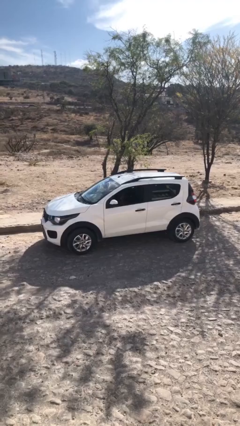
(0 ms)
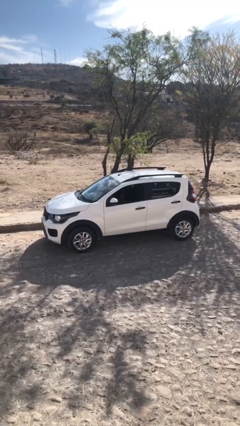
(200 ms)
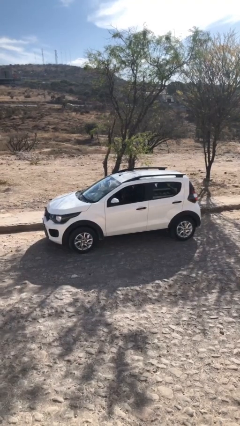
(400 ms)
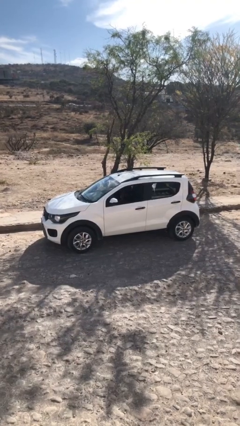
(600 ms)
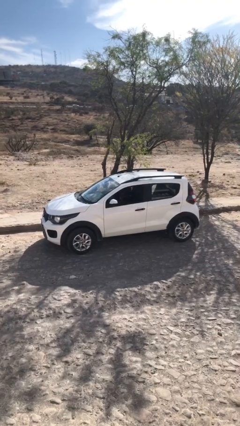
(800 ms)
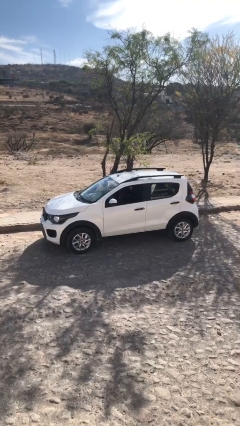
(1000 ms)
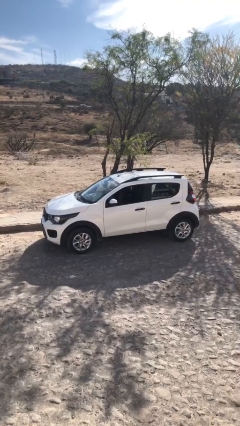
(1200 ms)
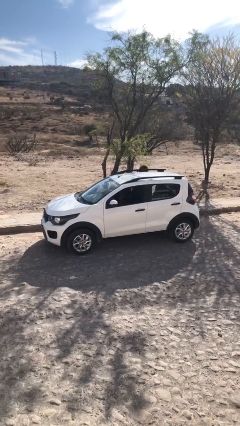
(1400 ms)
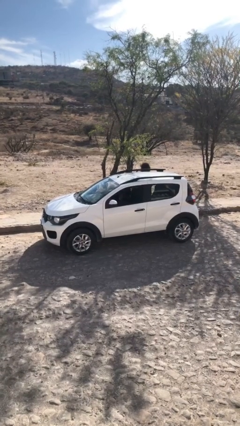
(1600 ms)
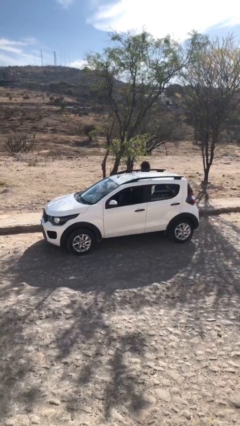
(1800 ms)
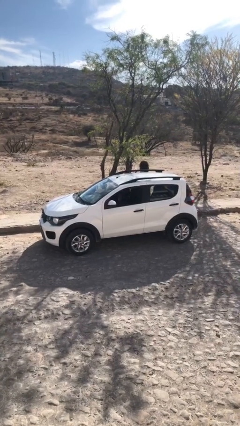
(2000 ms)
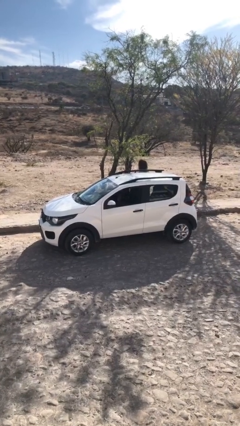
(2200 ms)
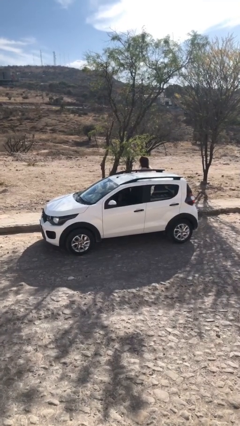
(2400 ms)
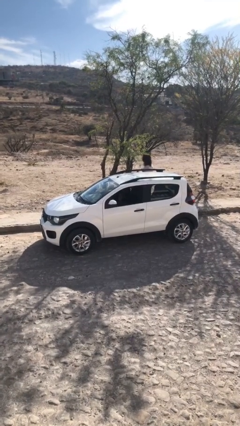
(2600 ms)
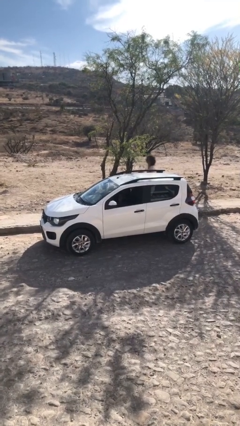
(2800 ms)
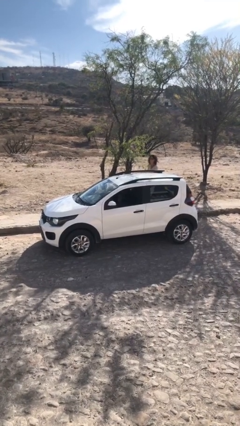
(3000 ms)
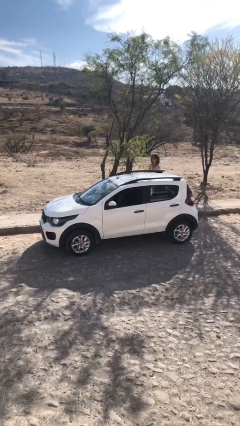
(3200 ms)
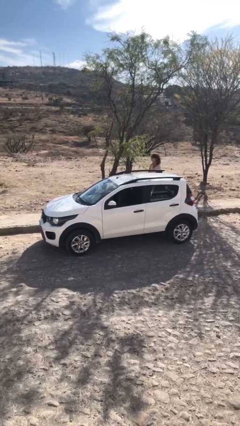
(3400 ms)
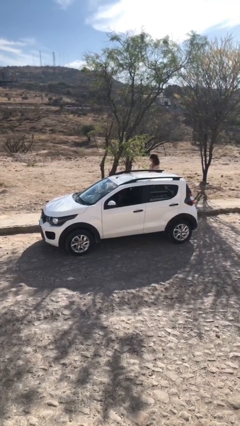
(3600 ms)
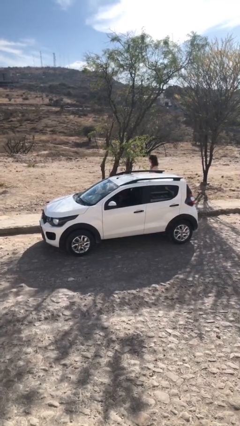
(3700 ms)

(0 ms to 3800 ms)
car drops off person

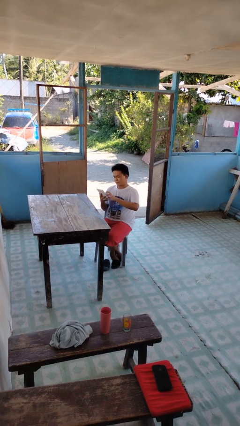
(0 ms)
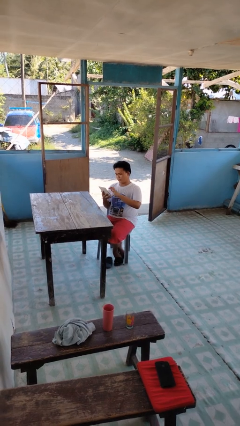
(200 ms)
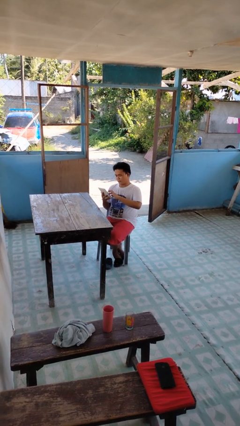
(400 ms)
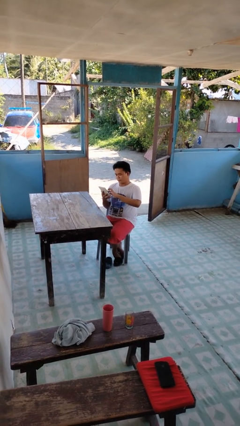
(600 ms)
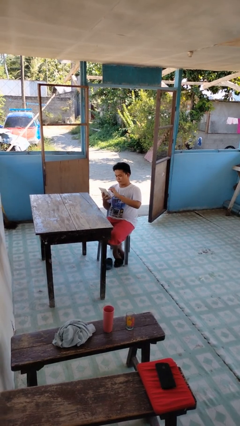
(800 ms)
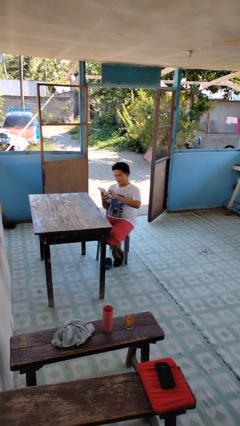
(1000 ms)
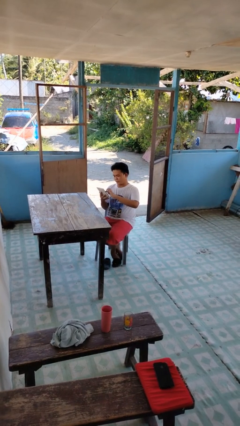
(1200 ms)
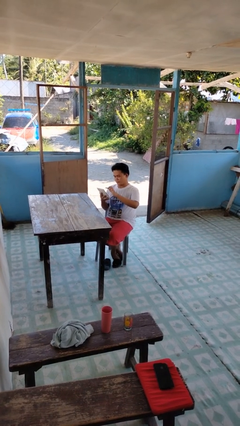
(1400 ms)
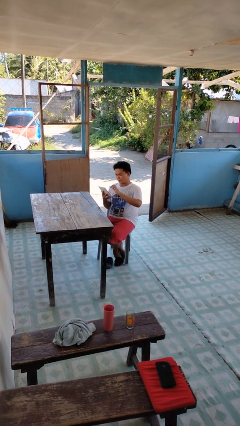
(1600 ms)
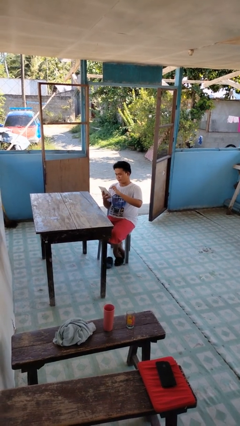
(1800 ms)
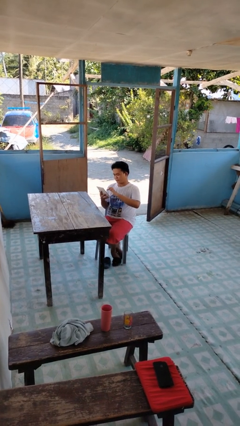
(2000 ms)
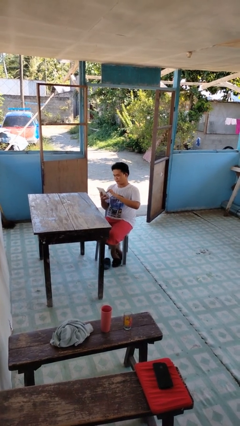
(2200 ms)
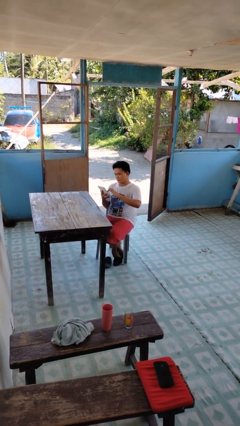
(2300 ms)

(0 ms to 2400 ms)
person interacts with tablet

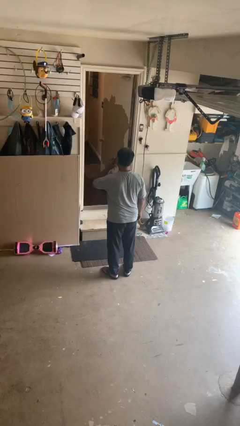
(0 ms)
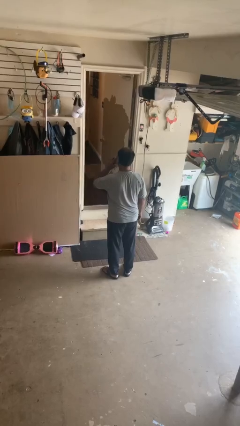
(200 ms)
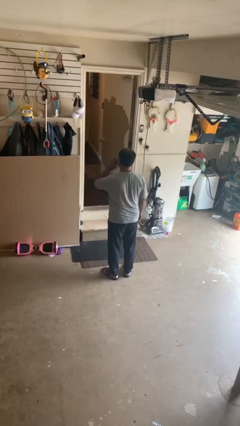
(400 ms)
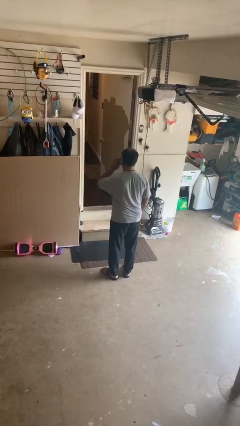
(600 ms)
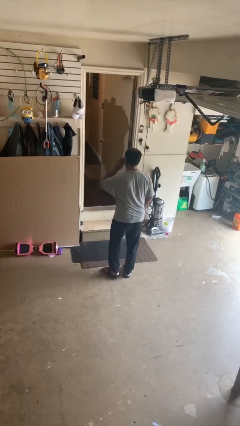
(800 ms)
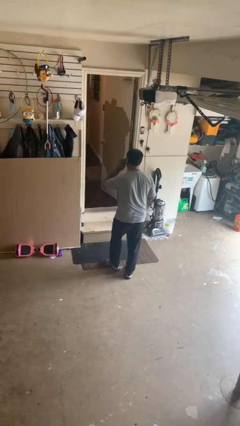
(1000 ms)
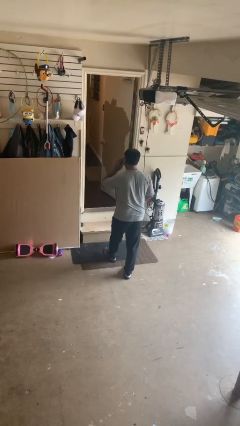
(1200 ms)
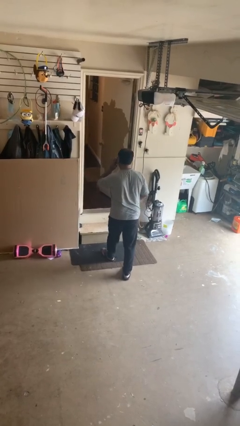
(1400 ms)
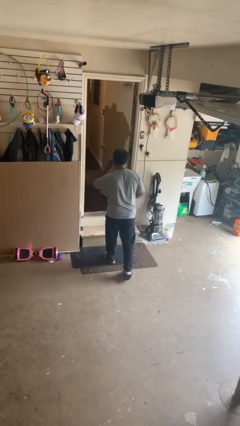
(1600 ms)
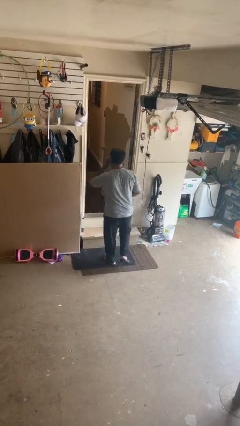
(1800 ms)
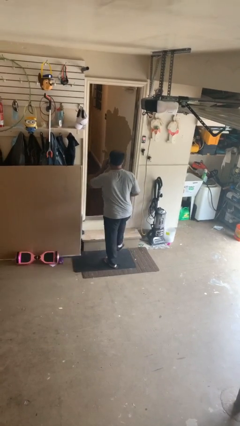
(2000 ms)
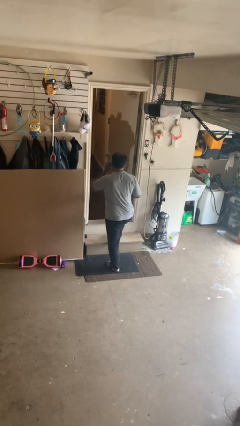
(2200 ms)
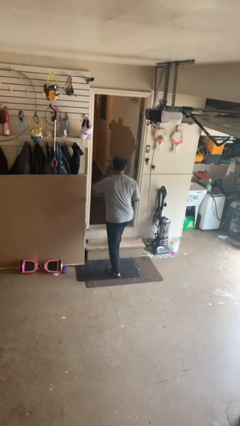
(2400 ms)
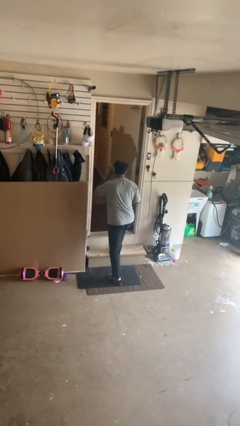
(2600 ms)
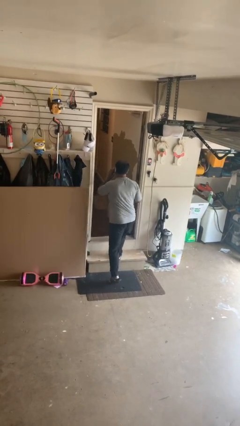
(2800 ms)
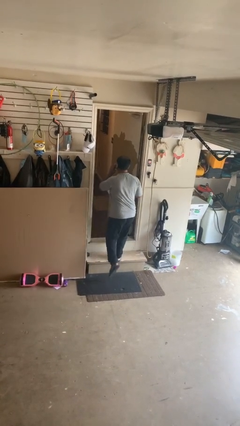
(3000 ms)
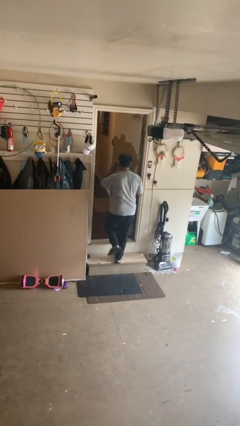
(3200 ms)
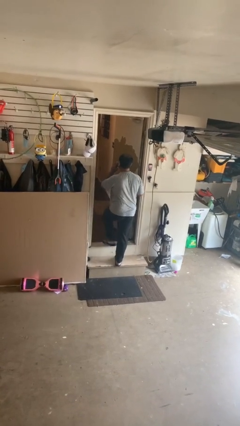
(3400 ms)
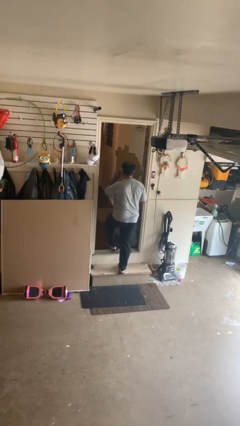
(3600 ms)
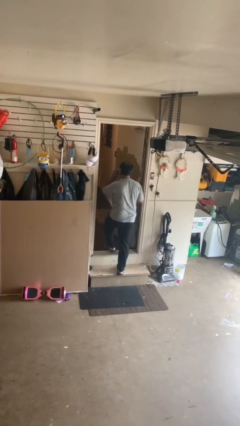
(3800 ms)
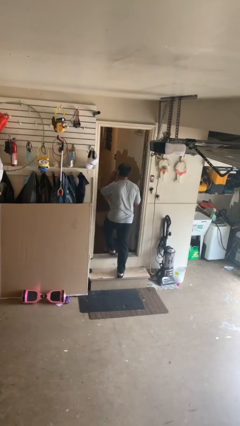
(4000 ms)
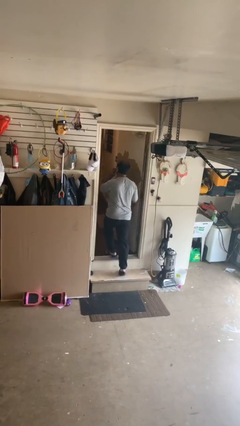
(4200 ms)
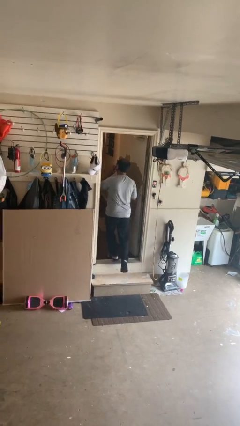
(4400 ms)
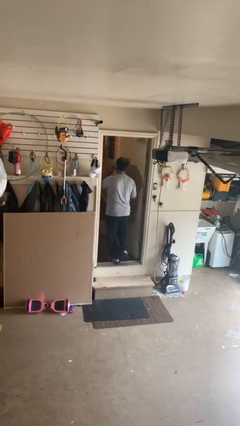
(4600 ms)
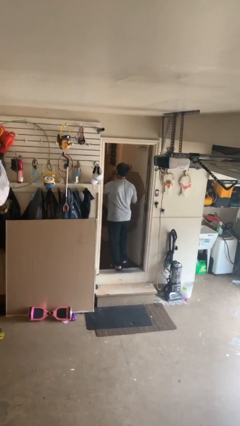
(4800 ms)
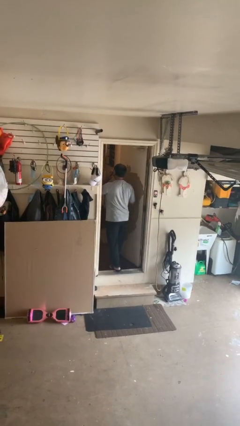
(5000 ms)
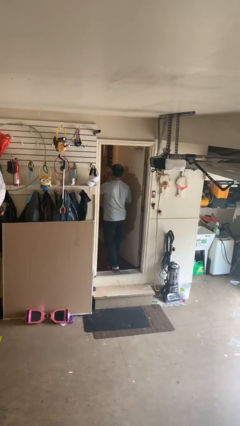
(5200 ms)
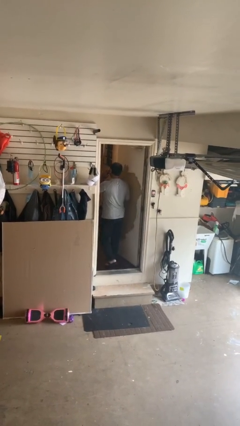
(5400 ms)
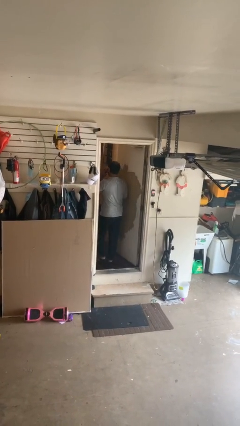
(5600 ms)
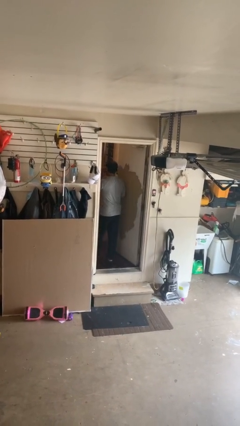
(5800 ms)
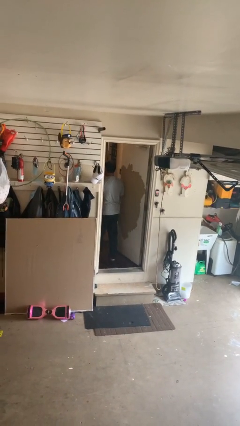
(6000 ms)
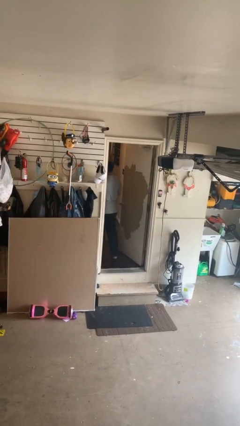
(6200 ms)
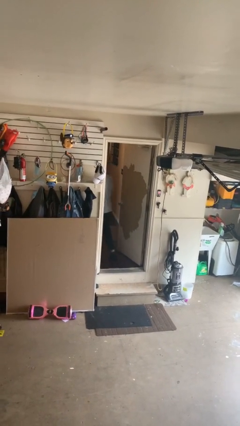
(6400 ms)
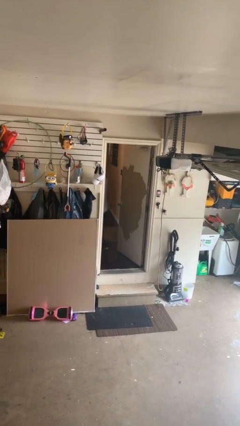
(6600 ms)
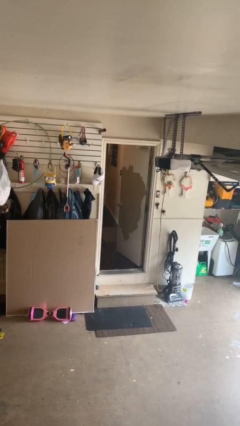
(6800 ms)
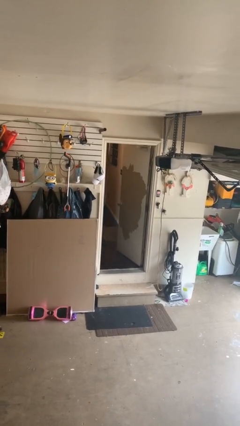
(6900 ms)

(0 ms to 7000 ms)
person exits scene through structure

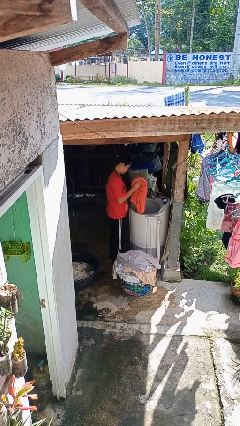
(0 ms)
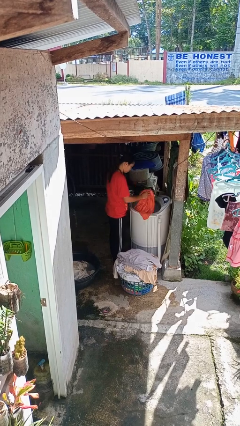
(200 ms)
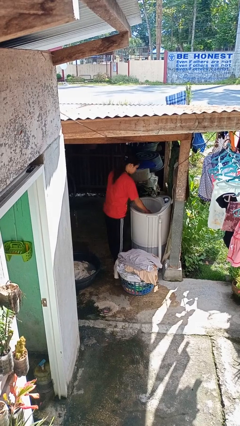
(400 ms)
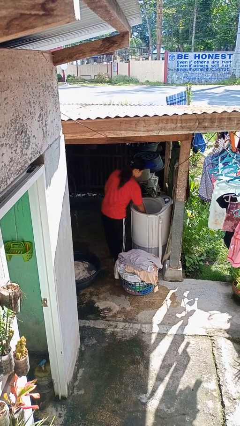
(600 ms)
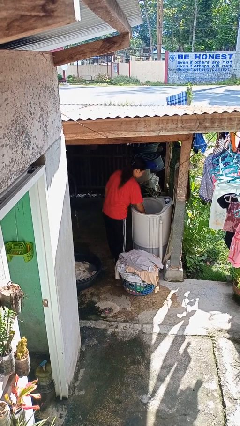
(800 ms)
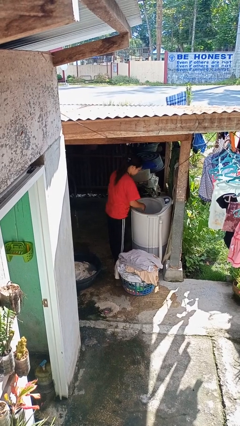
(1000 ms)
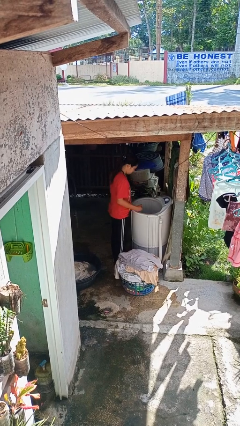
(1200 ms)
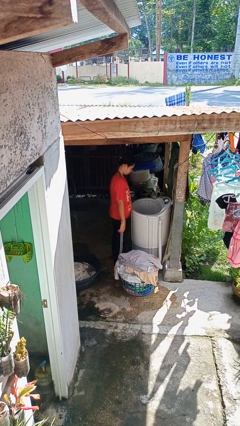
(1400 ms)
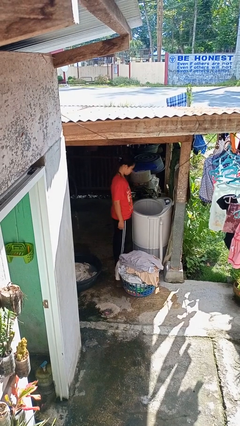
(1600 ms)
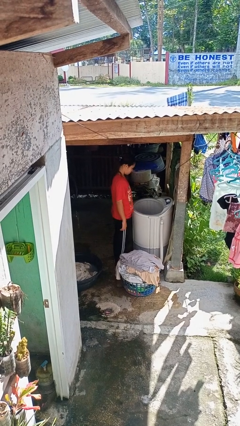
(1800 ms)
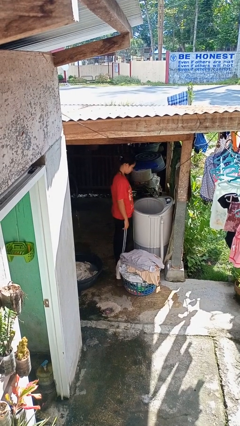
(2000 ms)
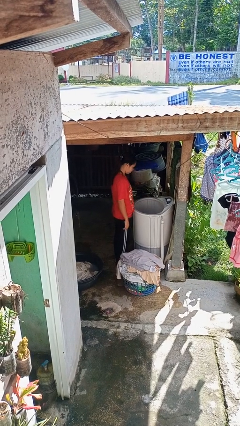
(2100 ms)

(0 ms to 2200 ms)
person loads clotheswasher

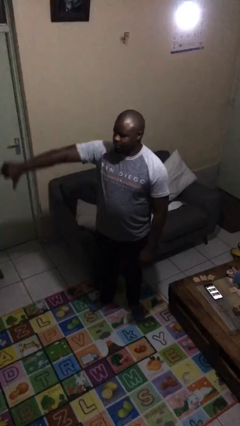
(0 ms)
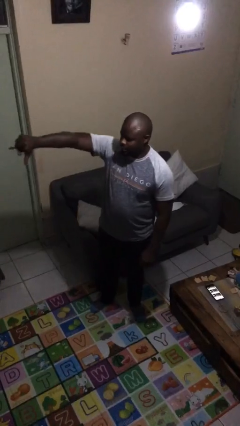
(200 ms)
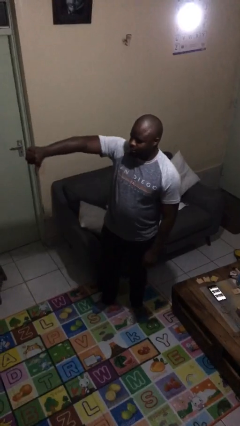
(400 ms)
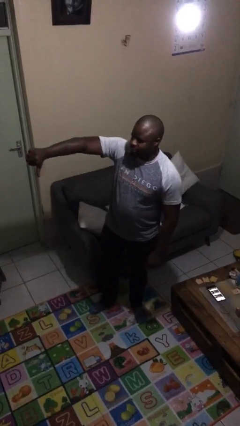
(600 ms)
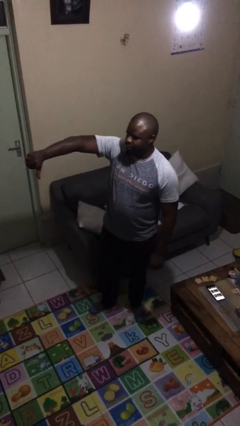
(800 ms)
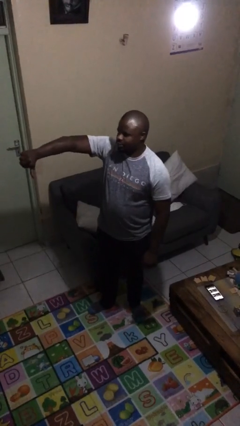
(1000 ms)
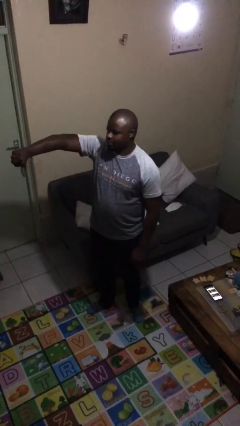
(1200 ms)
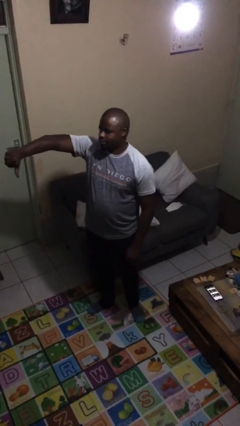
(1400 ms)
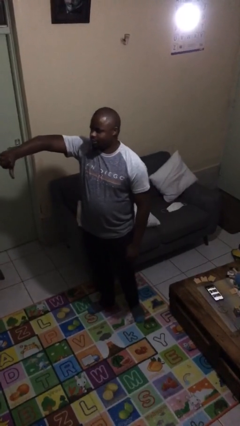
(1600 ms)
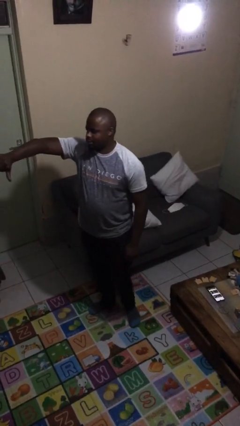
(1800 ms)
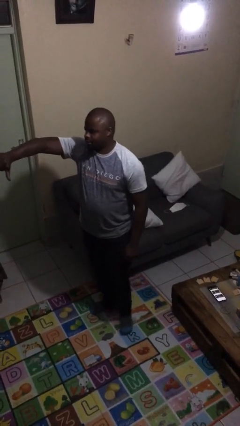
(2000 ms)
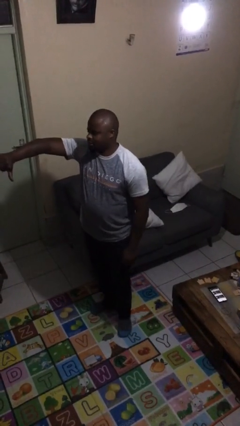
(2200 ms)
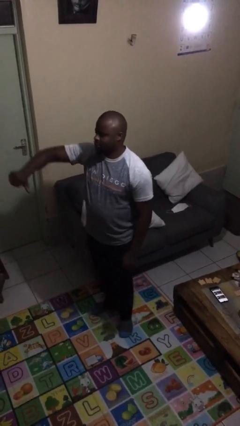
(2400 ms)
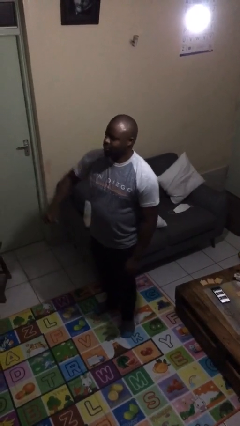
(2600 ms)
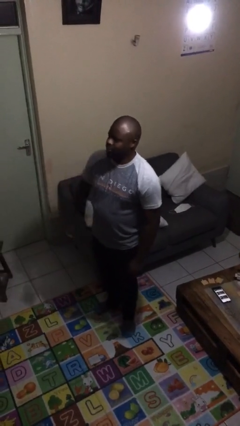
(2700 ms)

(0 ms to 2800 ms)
person gestures thumbs down
